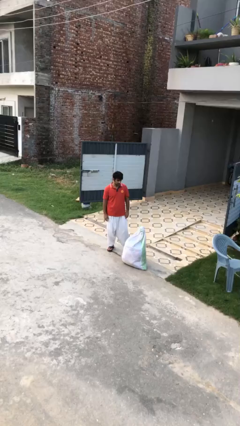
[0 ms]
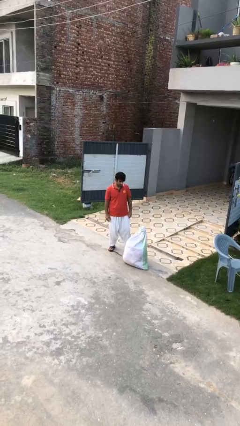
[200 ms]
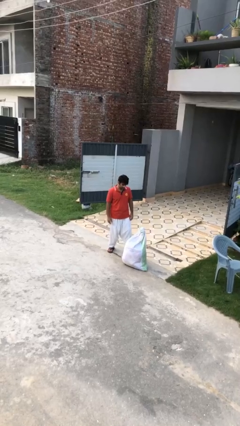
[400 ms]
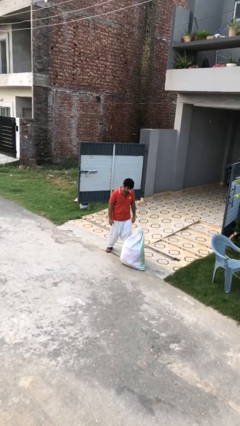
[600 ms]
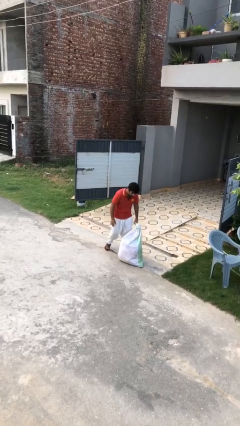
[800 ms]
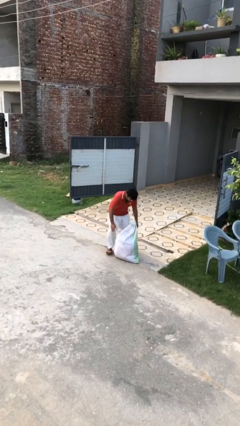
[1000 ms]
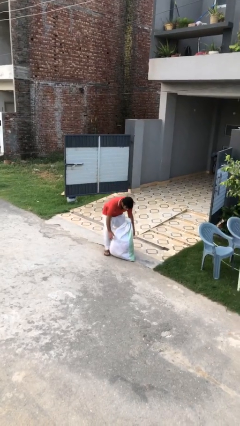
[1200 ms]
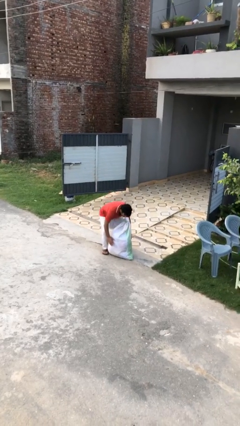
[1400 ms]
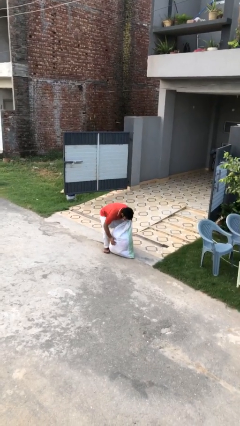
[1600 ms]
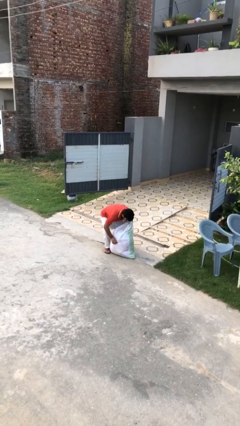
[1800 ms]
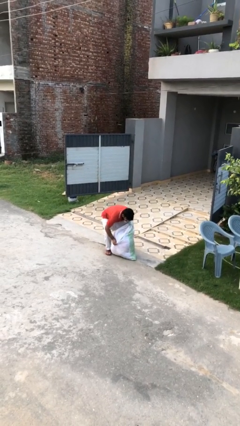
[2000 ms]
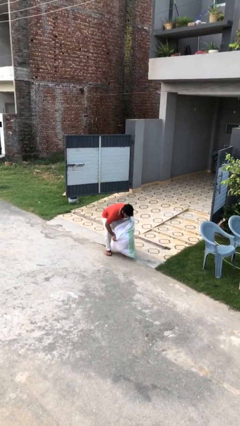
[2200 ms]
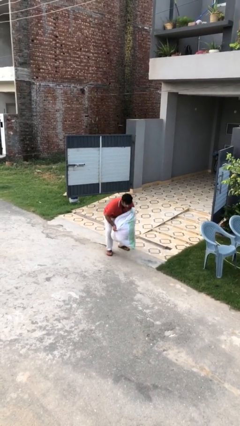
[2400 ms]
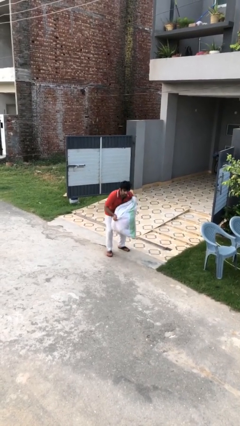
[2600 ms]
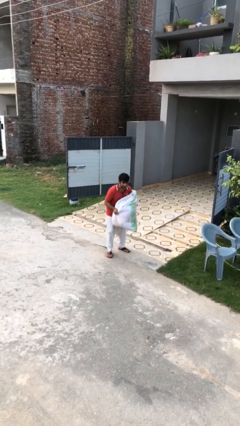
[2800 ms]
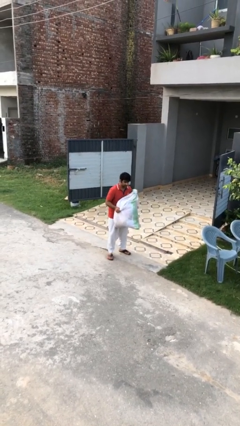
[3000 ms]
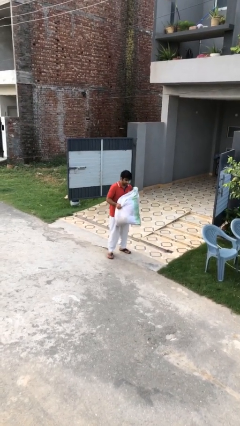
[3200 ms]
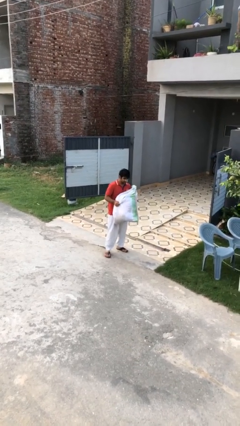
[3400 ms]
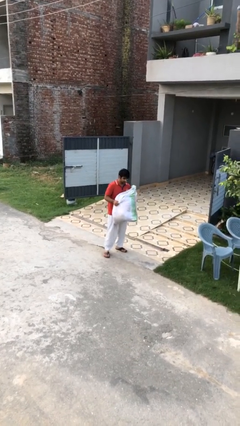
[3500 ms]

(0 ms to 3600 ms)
person picks up object from floor

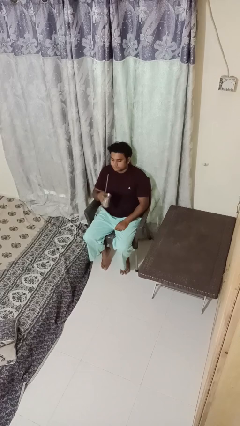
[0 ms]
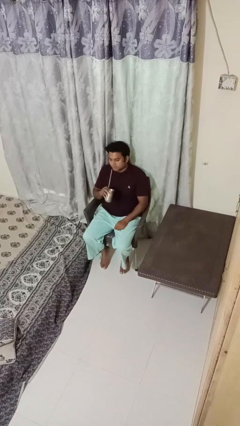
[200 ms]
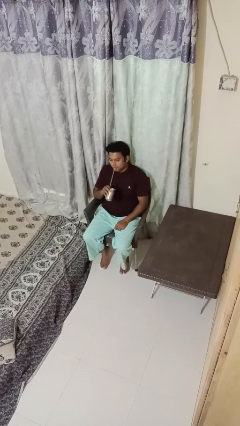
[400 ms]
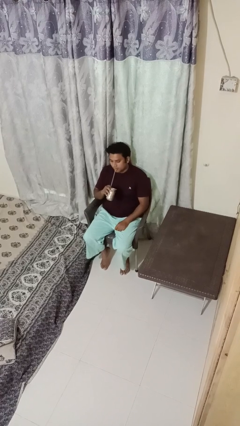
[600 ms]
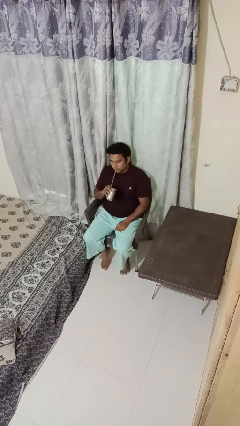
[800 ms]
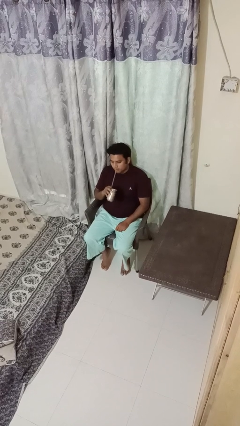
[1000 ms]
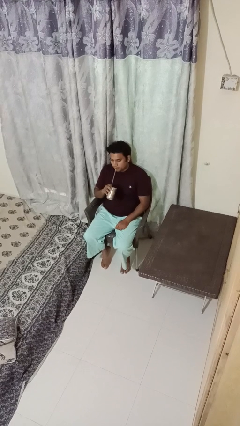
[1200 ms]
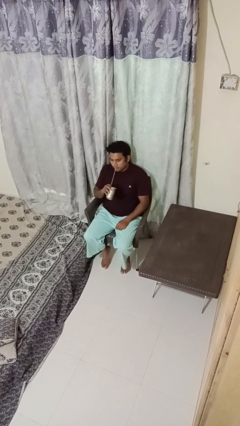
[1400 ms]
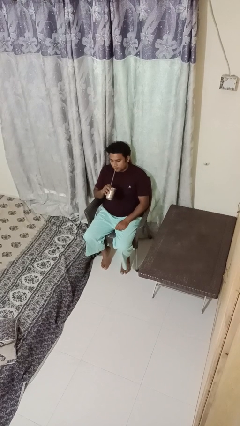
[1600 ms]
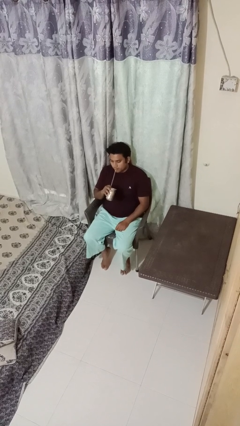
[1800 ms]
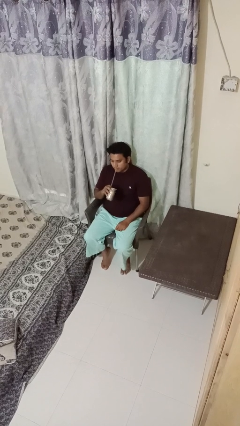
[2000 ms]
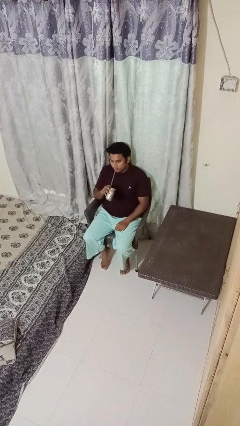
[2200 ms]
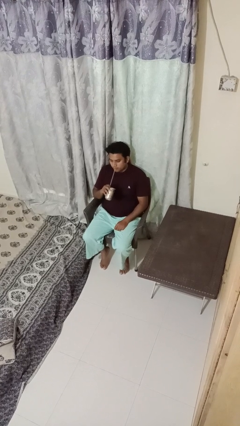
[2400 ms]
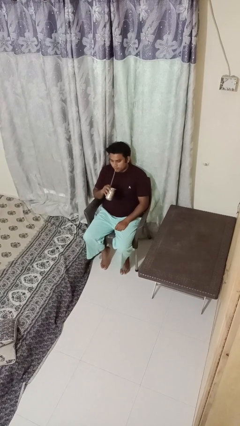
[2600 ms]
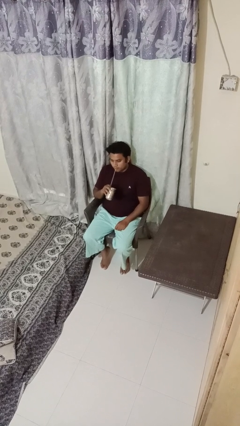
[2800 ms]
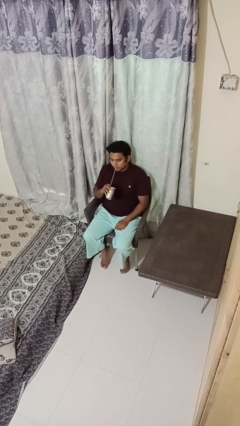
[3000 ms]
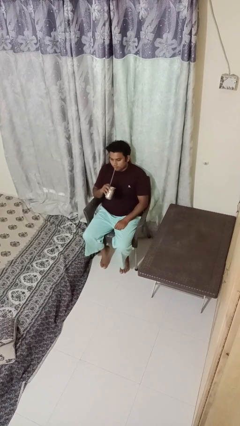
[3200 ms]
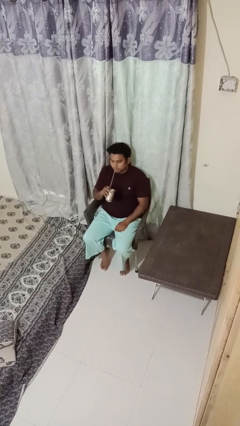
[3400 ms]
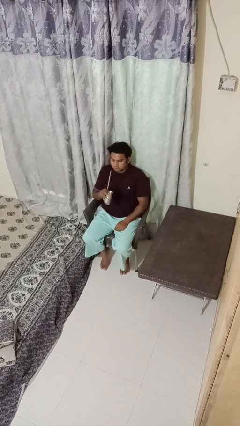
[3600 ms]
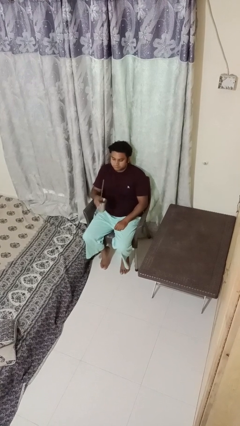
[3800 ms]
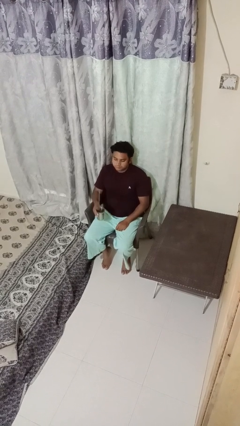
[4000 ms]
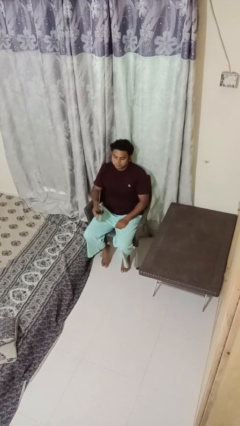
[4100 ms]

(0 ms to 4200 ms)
person drinks from straw

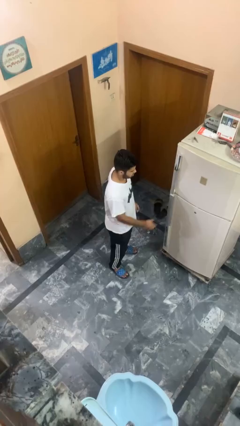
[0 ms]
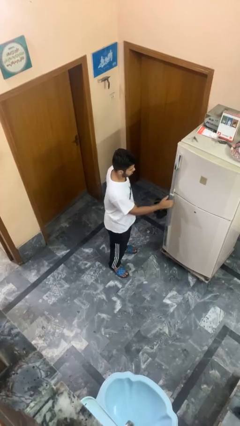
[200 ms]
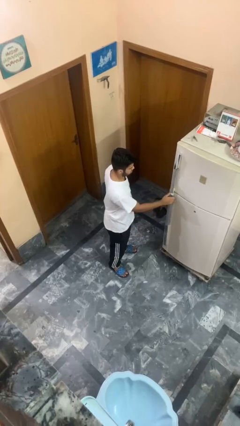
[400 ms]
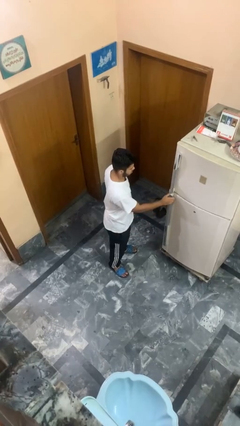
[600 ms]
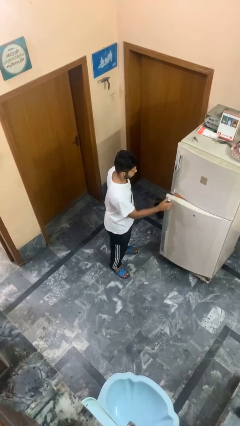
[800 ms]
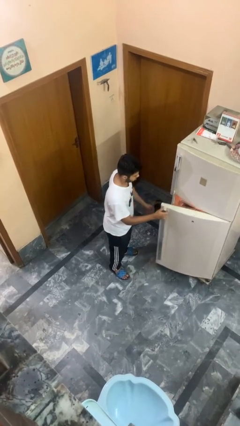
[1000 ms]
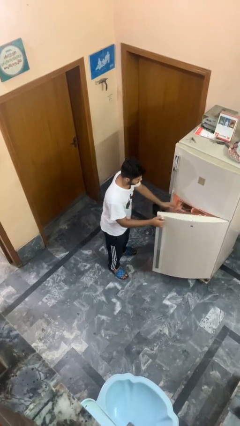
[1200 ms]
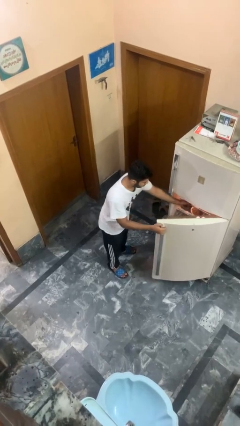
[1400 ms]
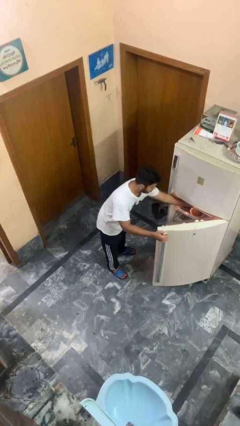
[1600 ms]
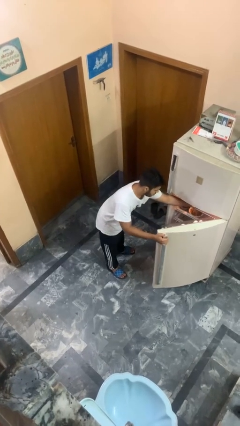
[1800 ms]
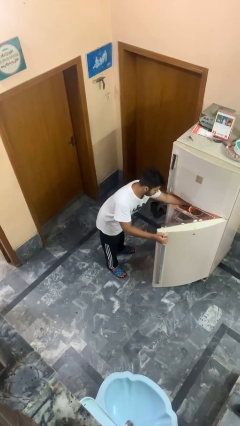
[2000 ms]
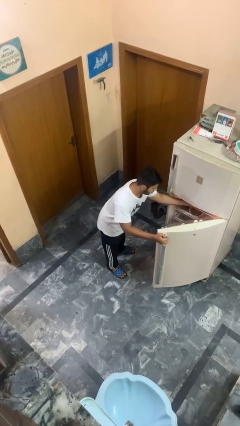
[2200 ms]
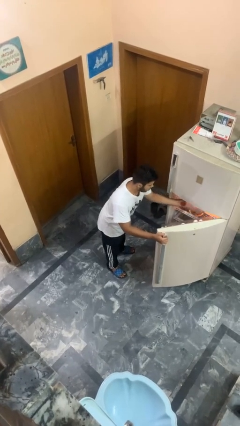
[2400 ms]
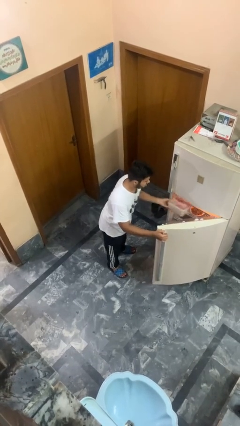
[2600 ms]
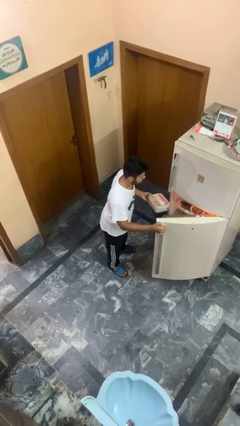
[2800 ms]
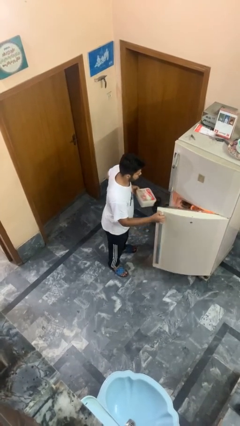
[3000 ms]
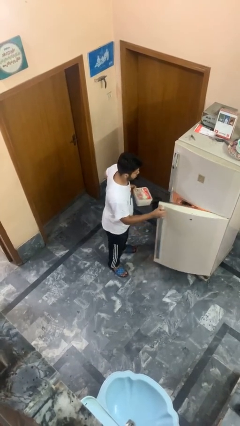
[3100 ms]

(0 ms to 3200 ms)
person takes object from refrigerator

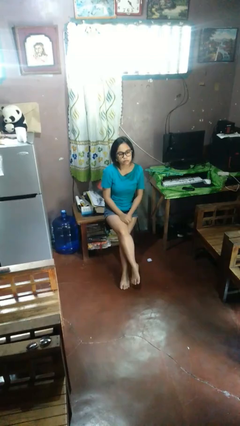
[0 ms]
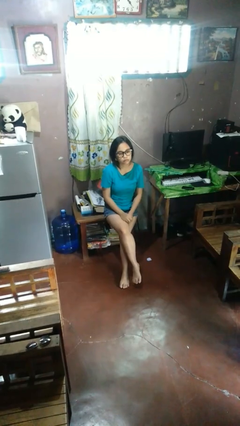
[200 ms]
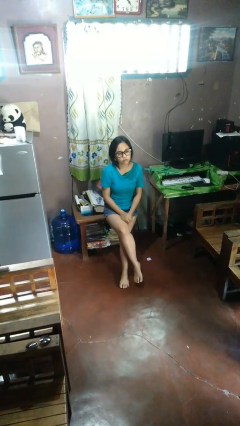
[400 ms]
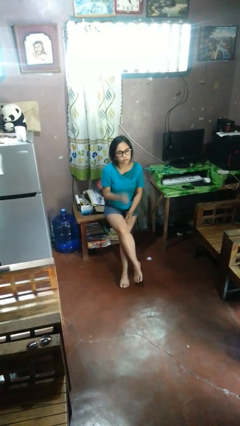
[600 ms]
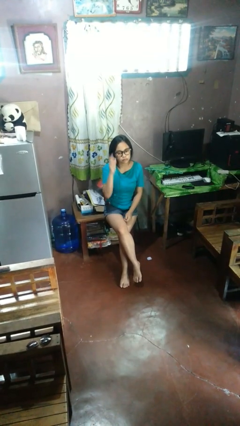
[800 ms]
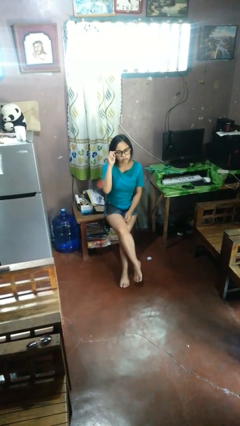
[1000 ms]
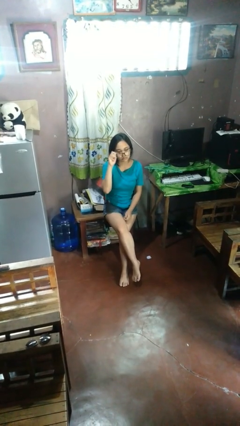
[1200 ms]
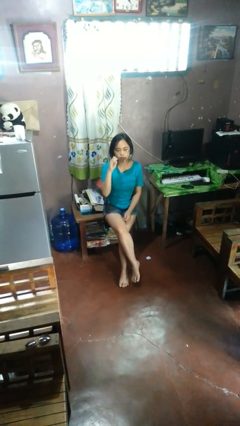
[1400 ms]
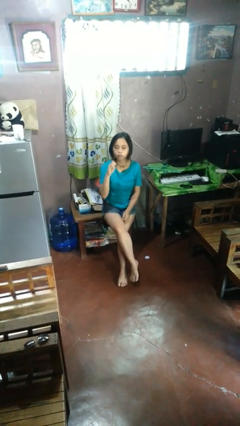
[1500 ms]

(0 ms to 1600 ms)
person takes off glasses

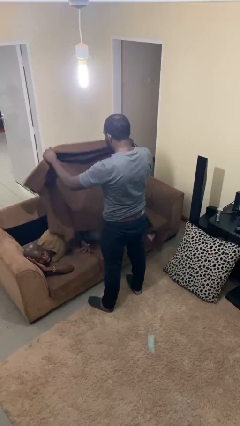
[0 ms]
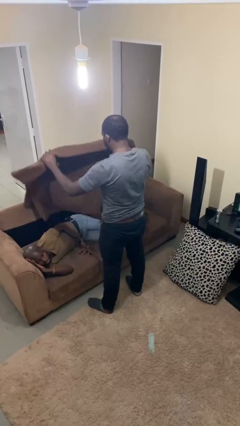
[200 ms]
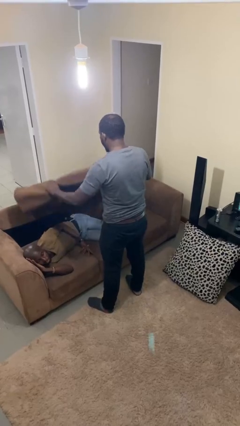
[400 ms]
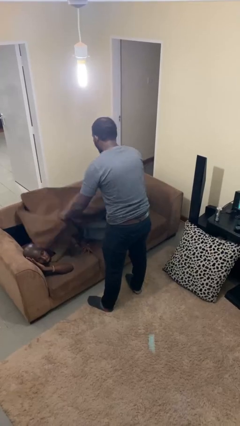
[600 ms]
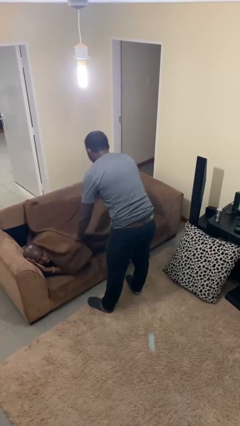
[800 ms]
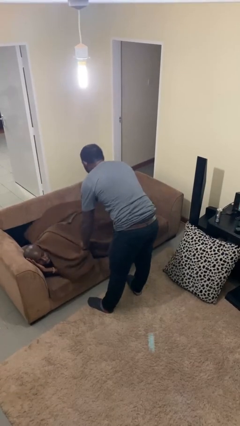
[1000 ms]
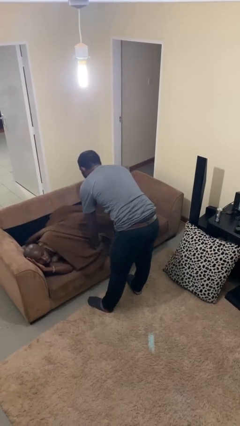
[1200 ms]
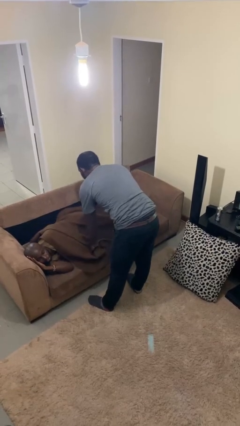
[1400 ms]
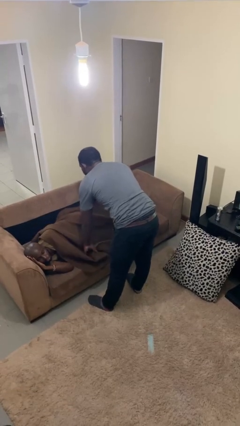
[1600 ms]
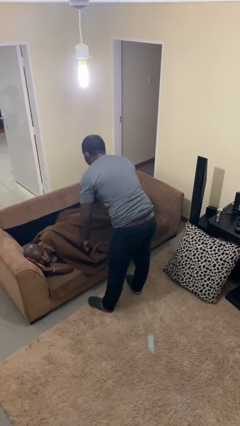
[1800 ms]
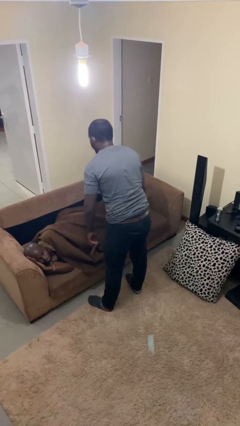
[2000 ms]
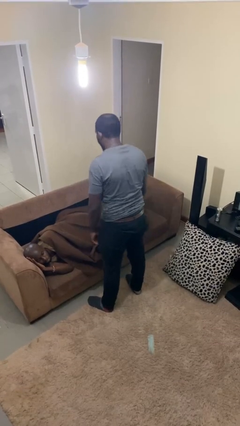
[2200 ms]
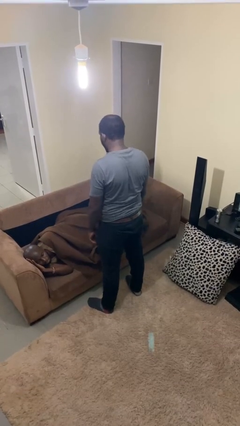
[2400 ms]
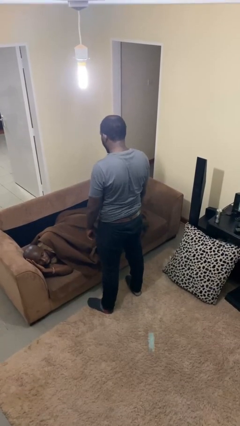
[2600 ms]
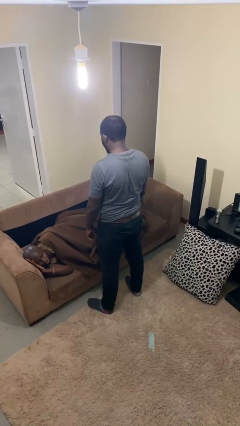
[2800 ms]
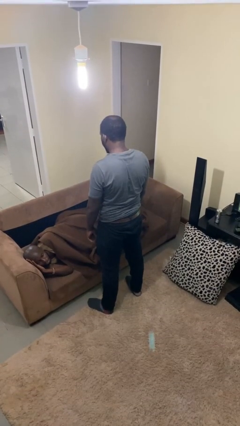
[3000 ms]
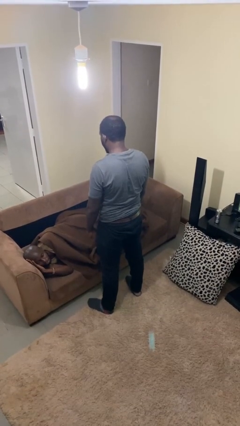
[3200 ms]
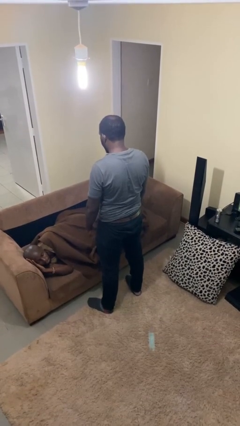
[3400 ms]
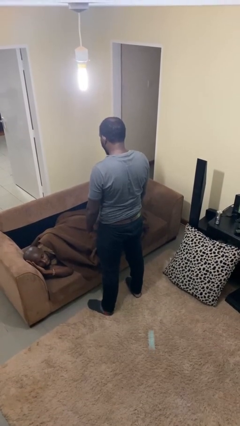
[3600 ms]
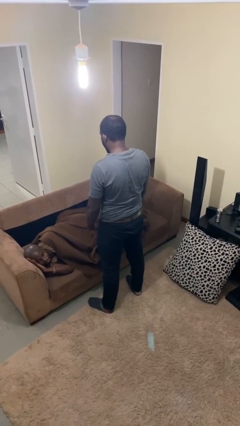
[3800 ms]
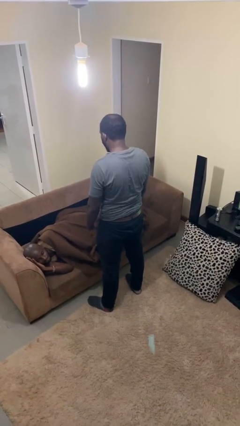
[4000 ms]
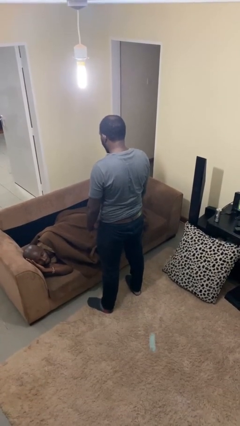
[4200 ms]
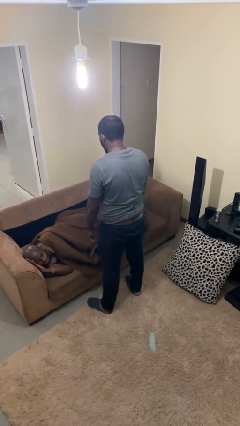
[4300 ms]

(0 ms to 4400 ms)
person covers friend with blanket
